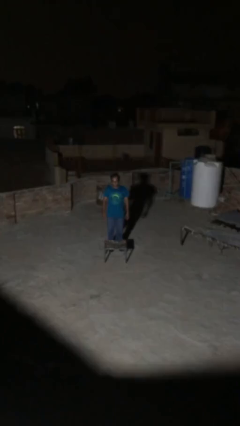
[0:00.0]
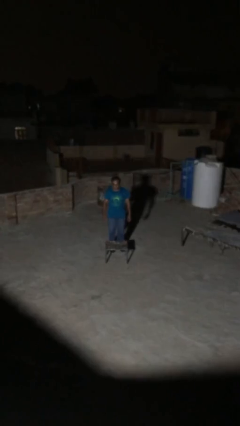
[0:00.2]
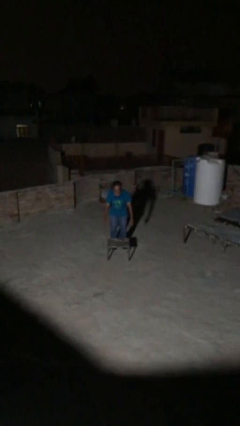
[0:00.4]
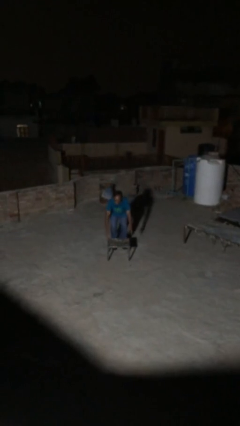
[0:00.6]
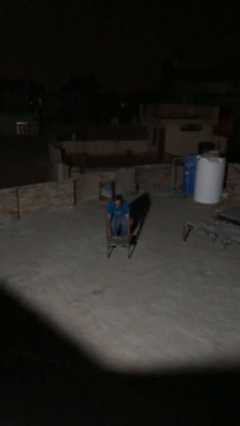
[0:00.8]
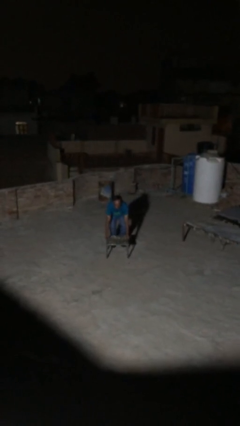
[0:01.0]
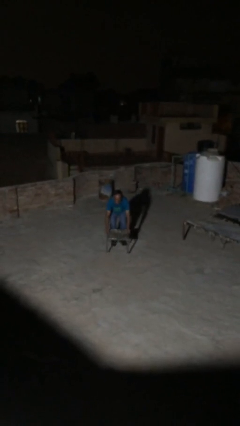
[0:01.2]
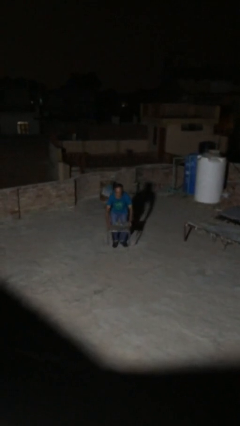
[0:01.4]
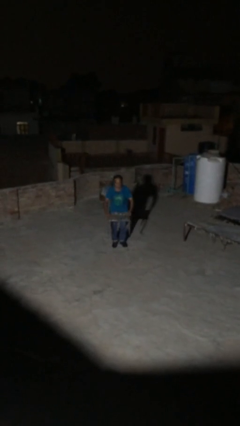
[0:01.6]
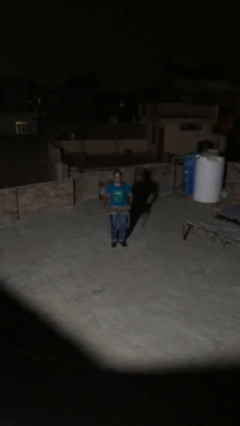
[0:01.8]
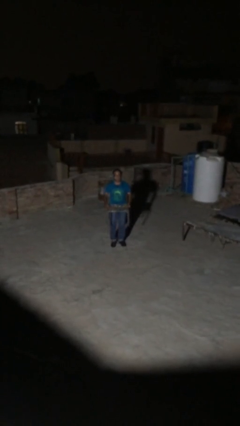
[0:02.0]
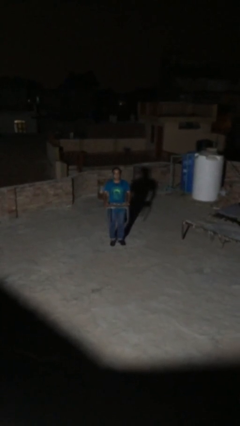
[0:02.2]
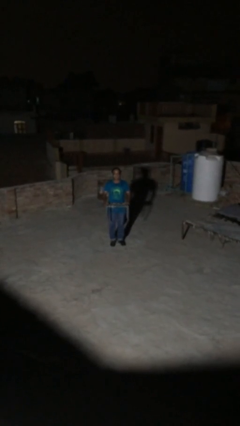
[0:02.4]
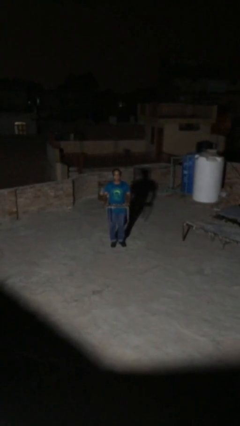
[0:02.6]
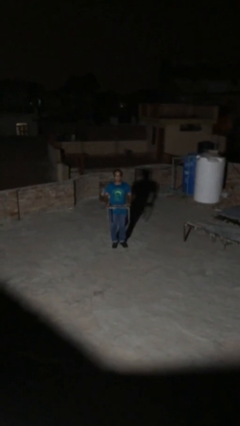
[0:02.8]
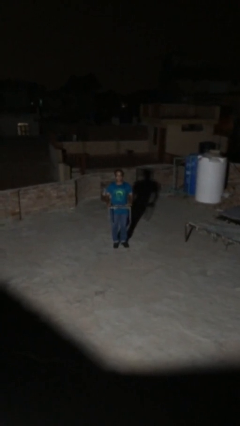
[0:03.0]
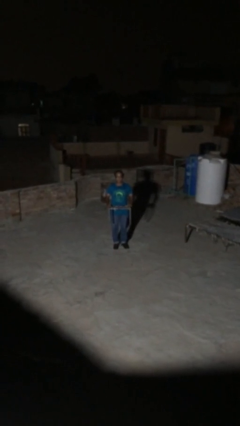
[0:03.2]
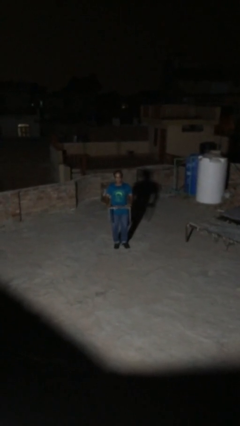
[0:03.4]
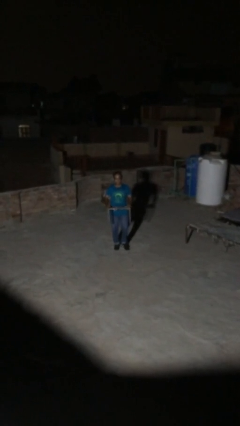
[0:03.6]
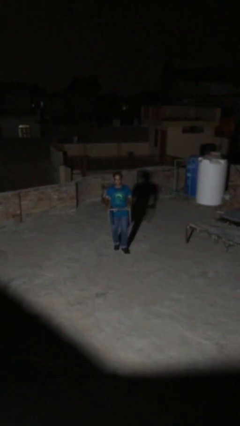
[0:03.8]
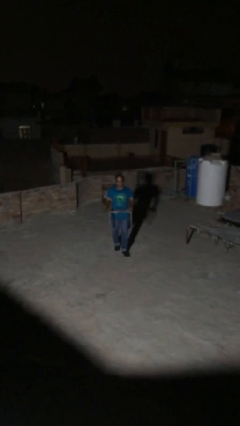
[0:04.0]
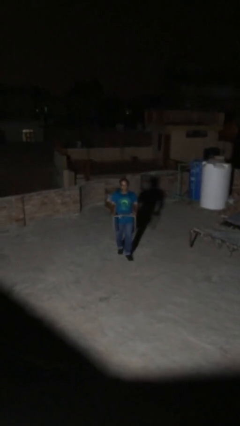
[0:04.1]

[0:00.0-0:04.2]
person picks up object from floor

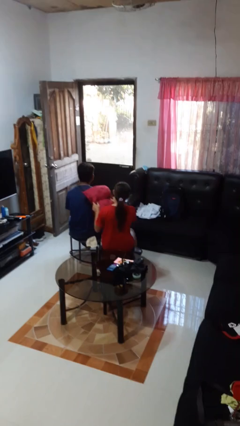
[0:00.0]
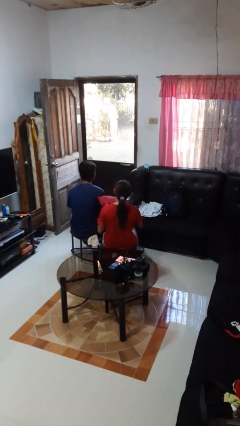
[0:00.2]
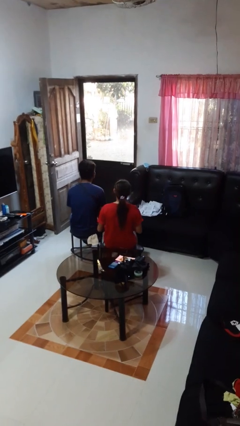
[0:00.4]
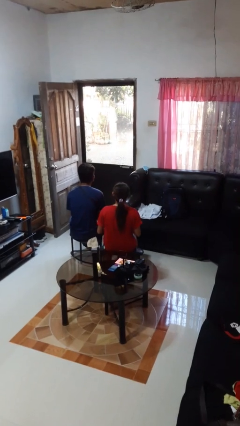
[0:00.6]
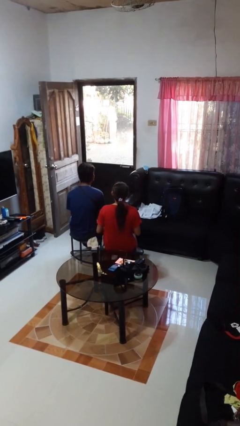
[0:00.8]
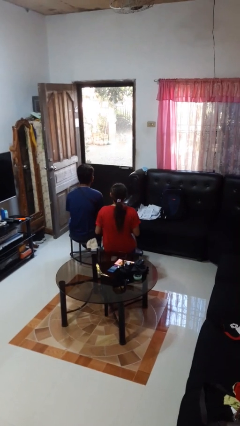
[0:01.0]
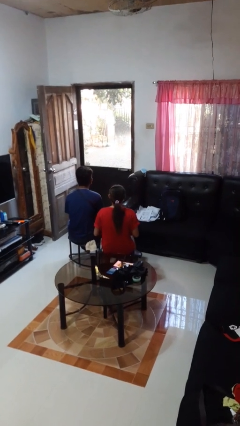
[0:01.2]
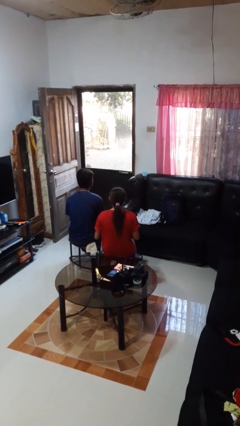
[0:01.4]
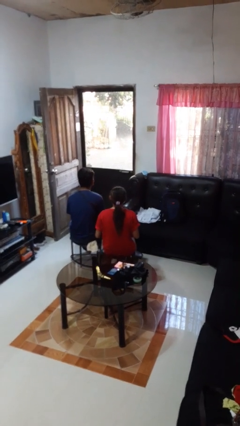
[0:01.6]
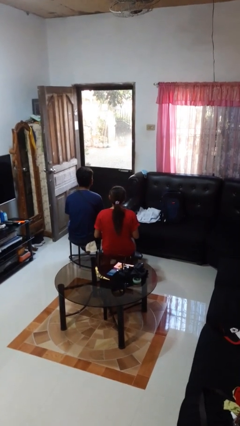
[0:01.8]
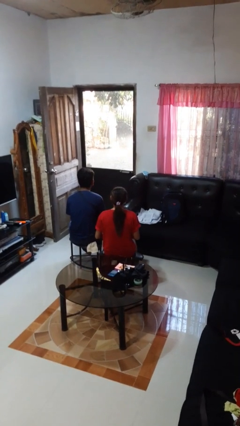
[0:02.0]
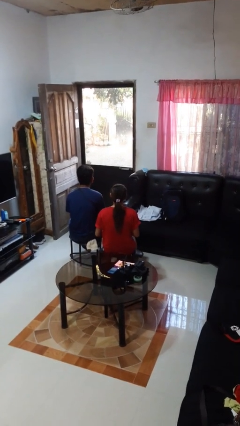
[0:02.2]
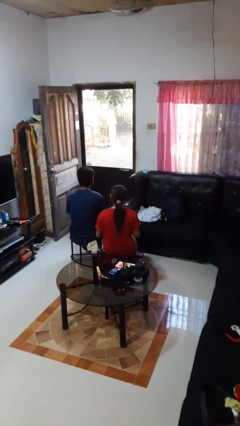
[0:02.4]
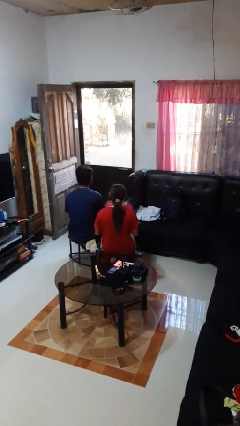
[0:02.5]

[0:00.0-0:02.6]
person hits person with pillow

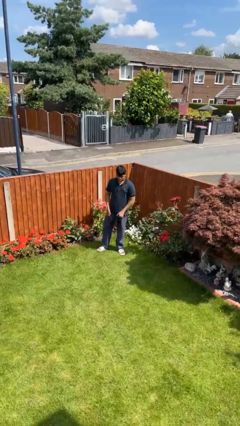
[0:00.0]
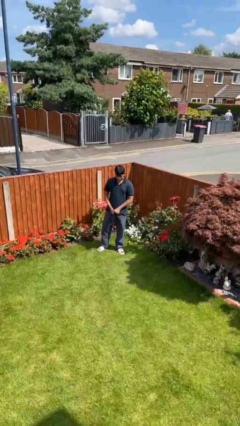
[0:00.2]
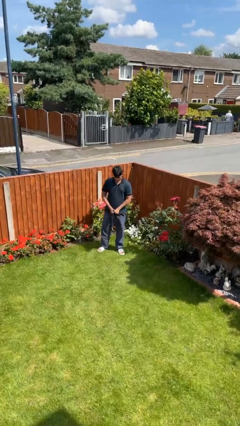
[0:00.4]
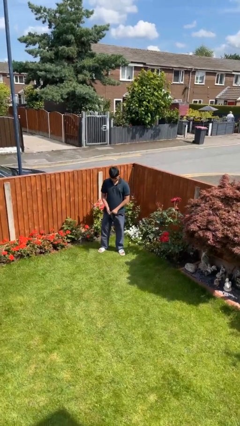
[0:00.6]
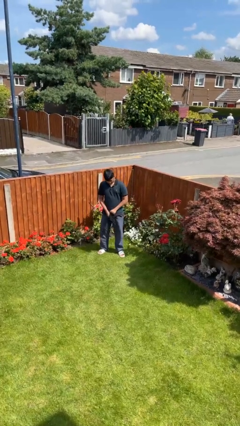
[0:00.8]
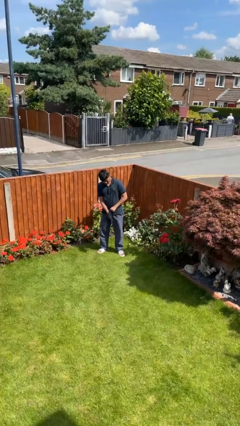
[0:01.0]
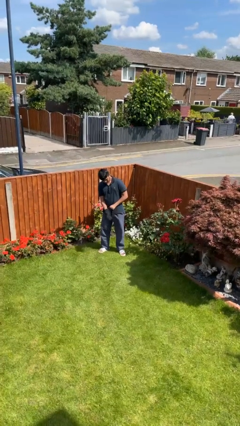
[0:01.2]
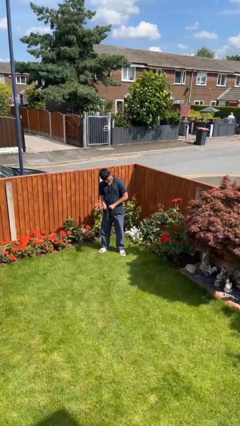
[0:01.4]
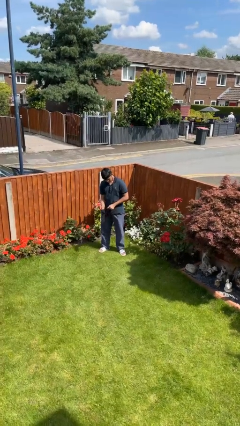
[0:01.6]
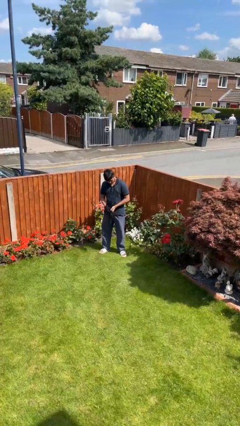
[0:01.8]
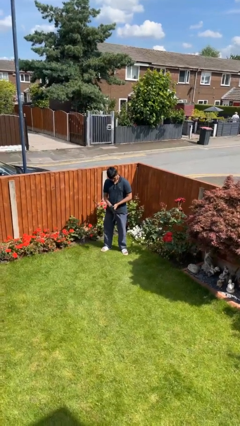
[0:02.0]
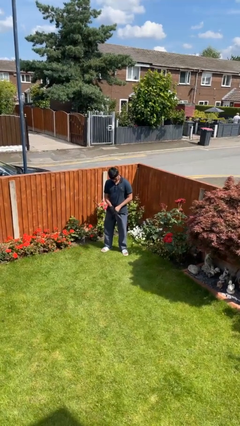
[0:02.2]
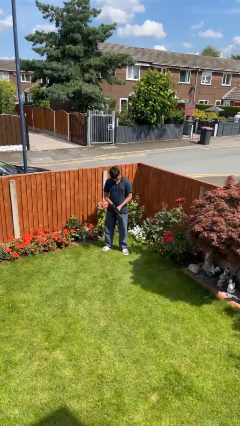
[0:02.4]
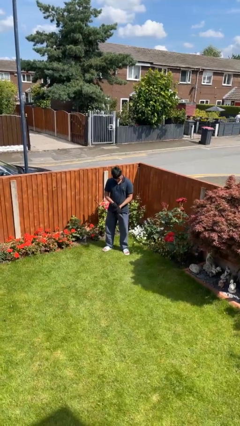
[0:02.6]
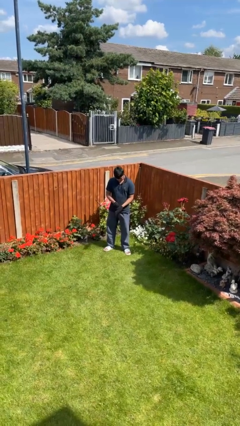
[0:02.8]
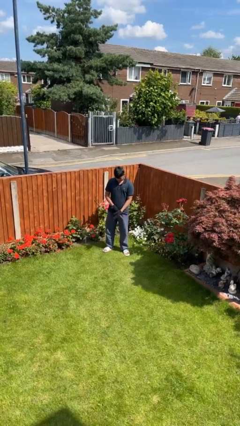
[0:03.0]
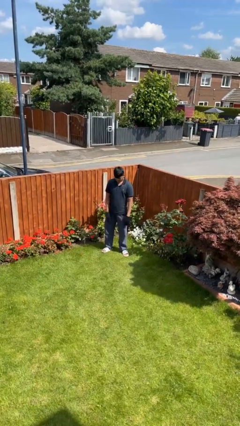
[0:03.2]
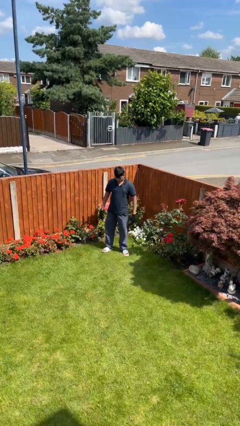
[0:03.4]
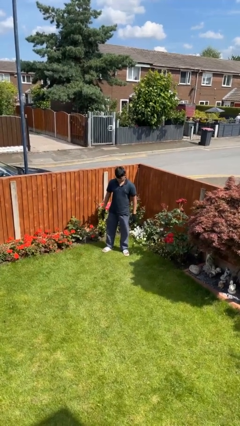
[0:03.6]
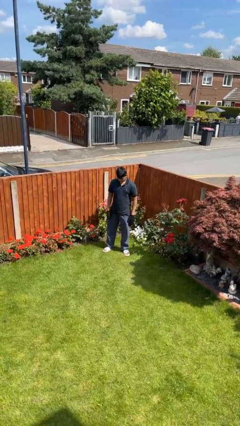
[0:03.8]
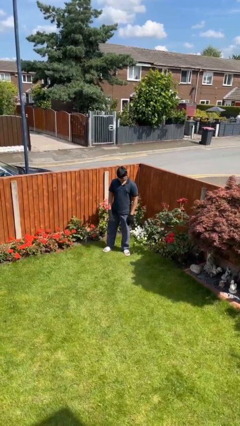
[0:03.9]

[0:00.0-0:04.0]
person puts on gloves

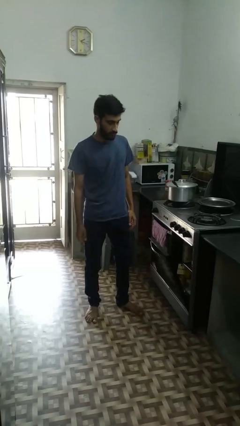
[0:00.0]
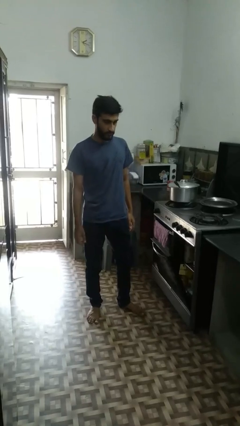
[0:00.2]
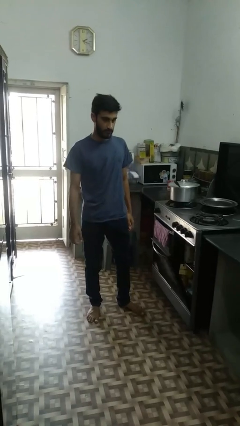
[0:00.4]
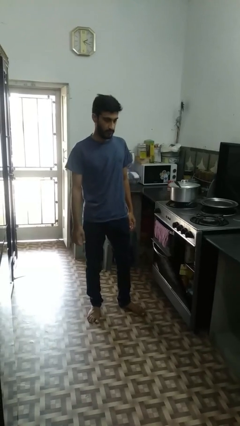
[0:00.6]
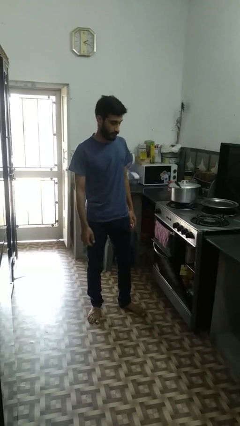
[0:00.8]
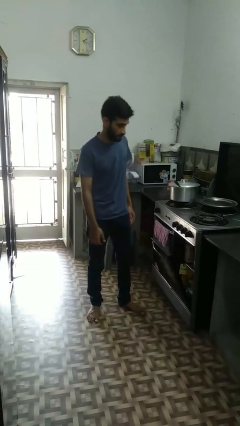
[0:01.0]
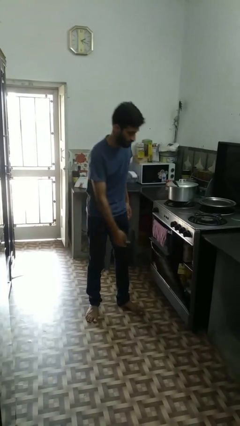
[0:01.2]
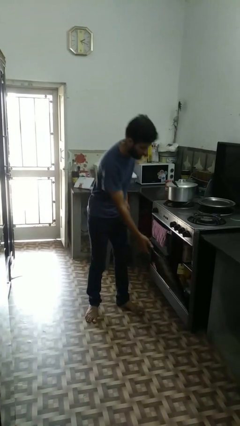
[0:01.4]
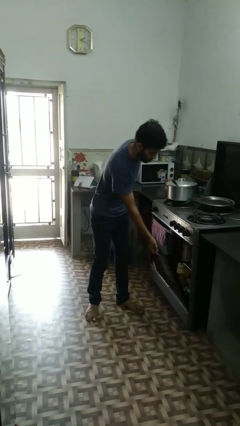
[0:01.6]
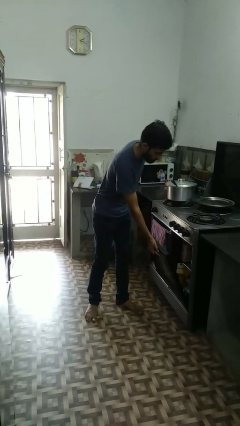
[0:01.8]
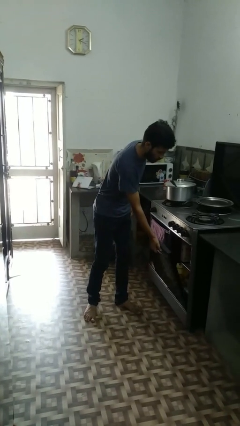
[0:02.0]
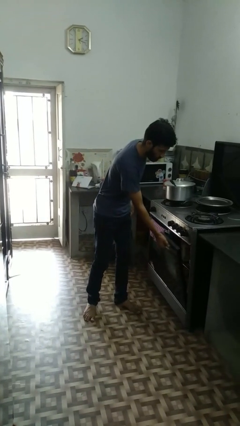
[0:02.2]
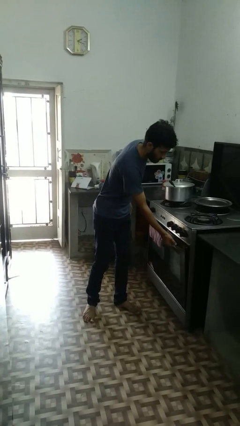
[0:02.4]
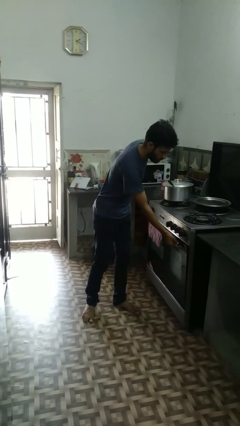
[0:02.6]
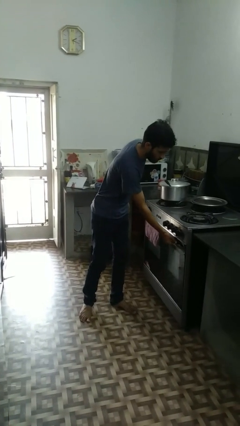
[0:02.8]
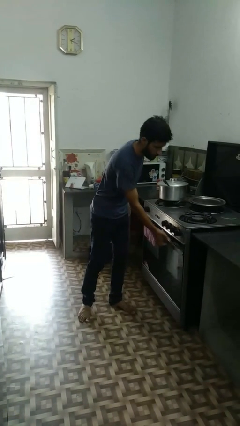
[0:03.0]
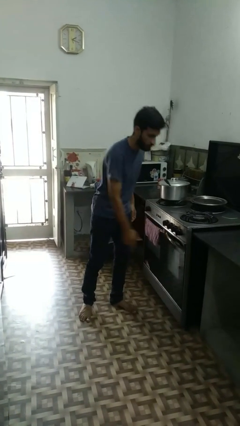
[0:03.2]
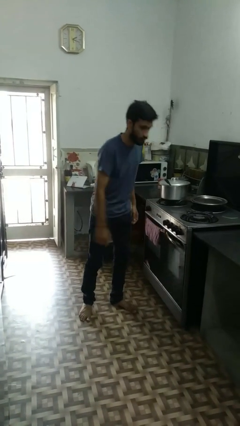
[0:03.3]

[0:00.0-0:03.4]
person closes dishwasher

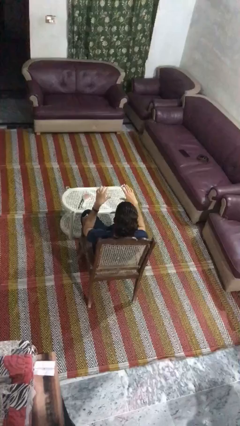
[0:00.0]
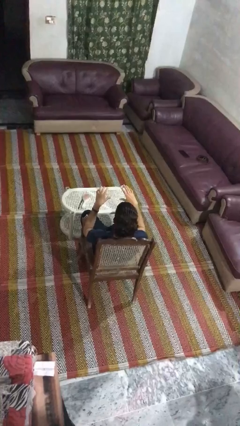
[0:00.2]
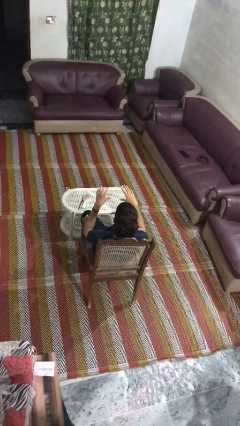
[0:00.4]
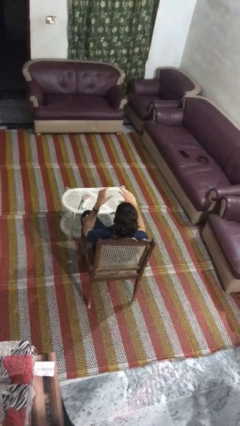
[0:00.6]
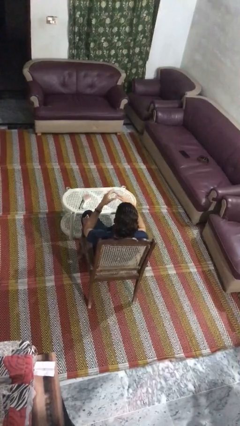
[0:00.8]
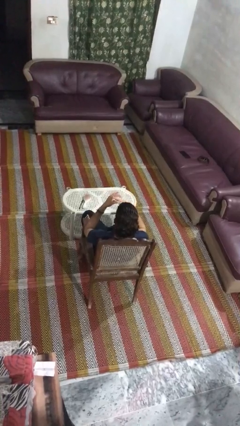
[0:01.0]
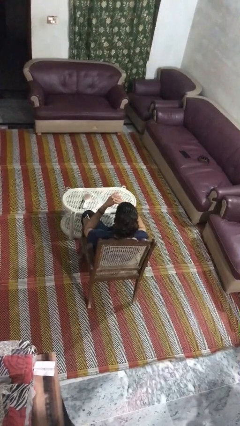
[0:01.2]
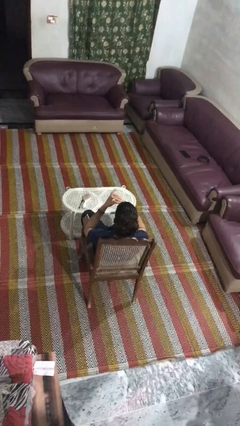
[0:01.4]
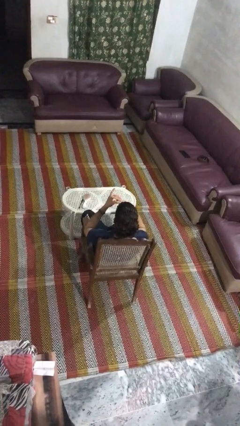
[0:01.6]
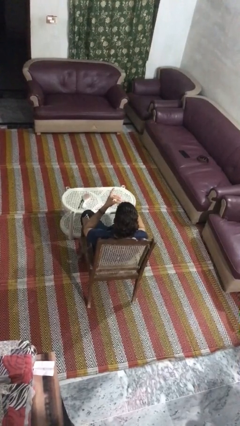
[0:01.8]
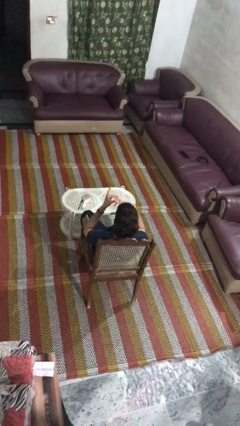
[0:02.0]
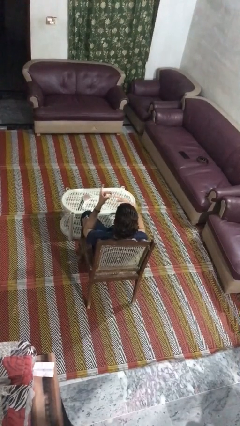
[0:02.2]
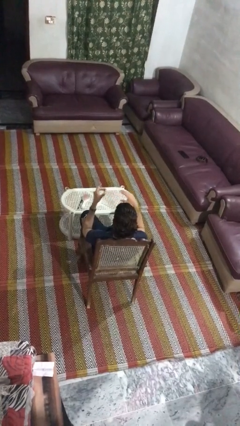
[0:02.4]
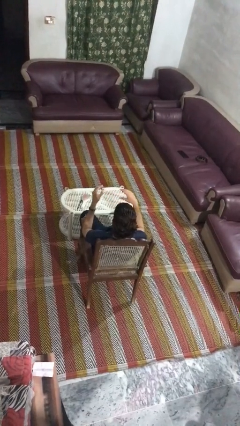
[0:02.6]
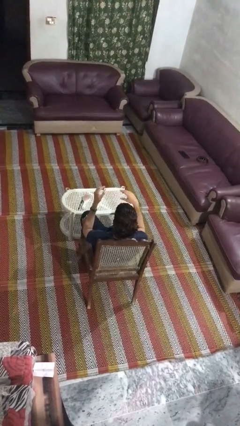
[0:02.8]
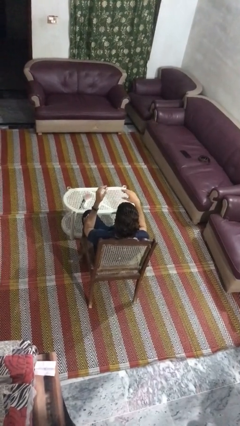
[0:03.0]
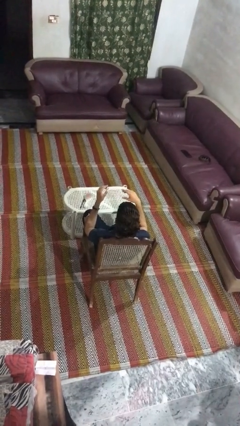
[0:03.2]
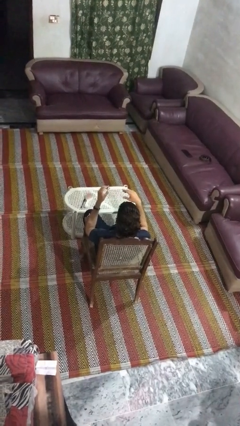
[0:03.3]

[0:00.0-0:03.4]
person takes off ring

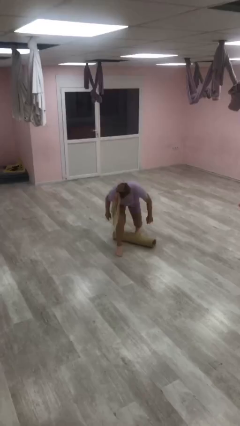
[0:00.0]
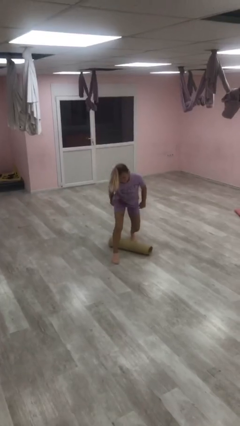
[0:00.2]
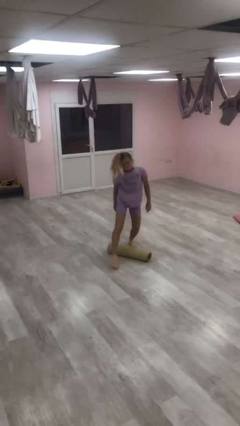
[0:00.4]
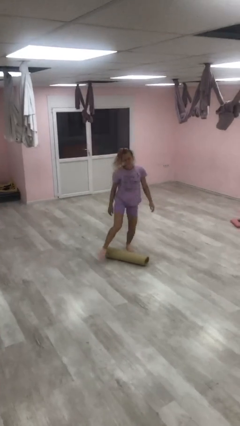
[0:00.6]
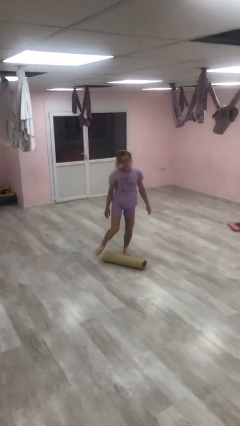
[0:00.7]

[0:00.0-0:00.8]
person stands up from floor
